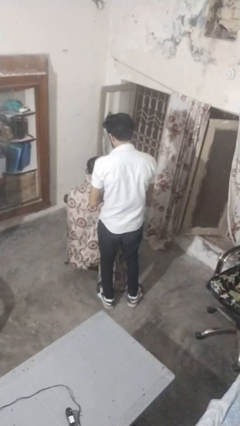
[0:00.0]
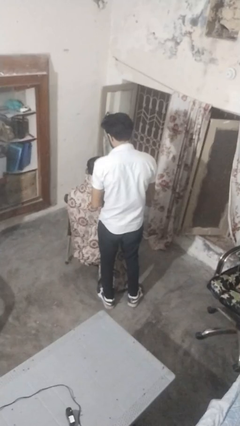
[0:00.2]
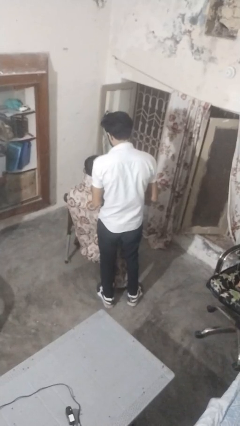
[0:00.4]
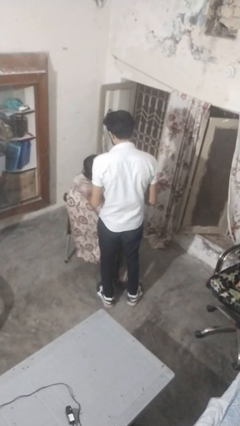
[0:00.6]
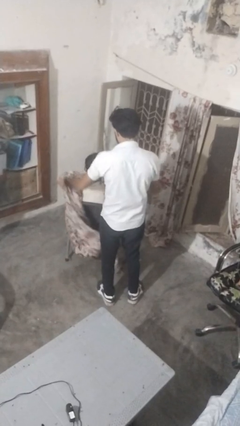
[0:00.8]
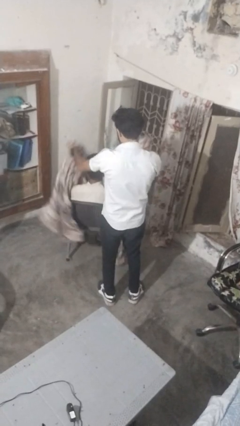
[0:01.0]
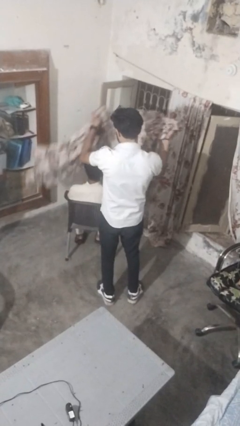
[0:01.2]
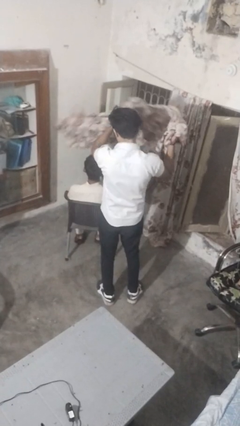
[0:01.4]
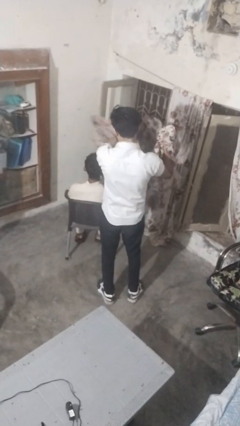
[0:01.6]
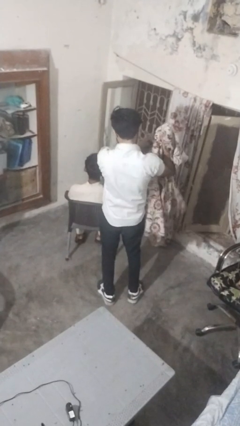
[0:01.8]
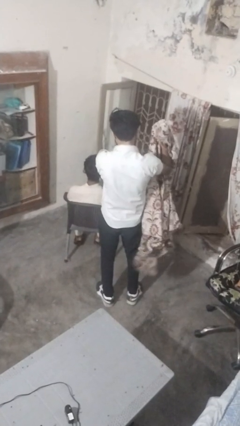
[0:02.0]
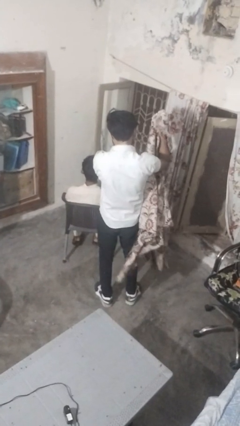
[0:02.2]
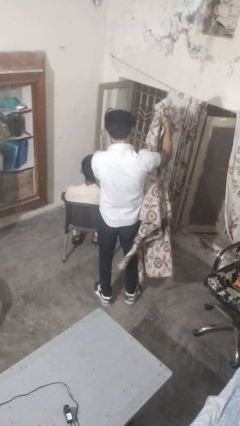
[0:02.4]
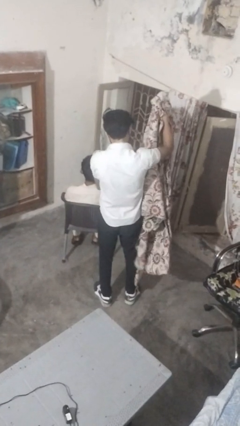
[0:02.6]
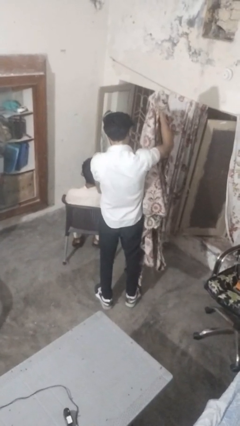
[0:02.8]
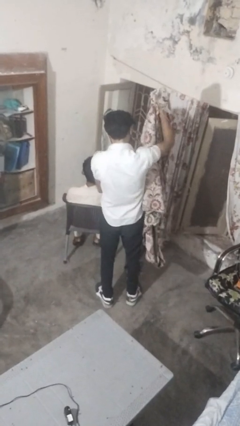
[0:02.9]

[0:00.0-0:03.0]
person uncovers friend with blanket

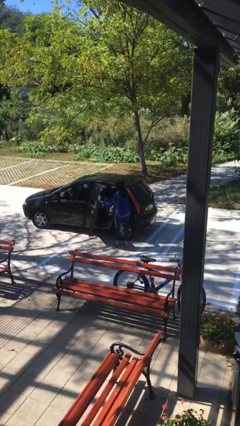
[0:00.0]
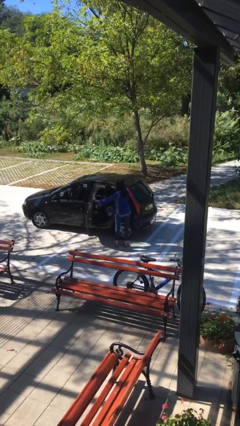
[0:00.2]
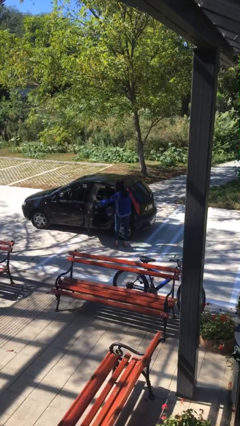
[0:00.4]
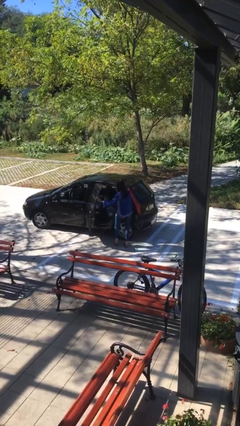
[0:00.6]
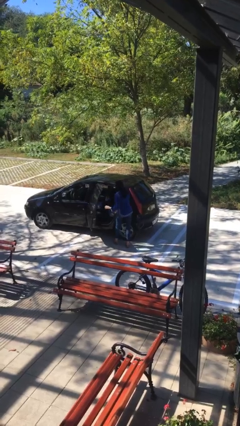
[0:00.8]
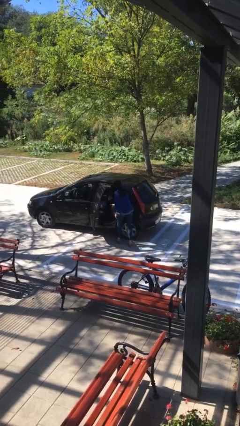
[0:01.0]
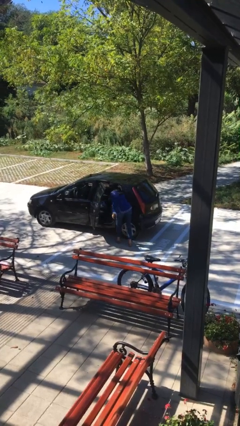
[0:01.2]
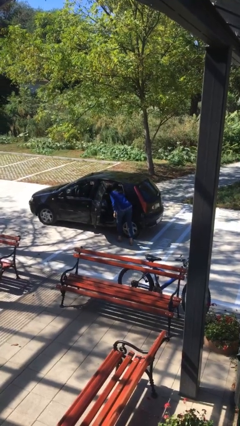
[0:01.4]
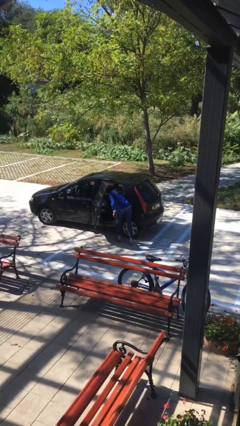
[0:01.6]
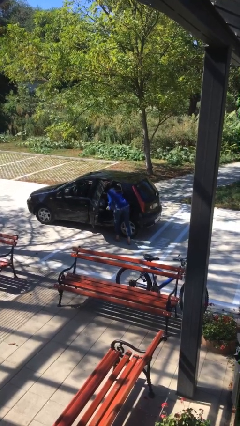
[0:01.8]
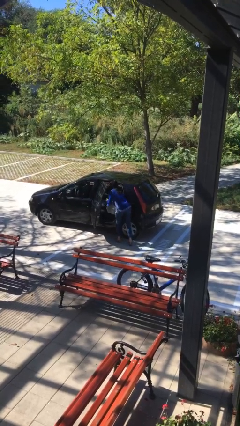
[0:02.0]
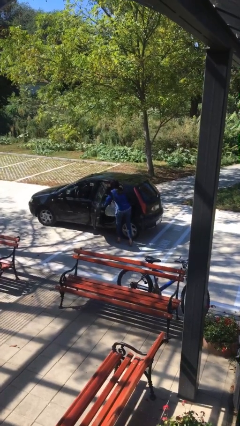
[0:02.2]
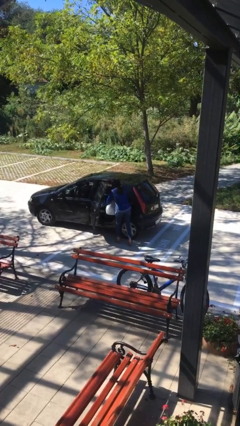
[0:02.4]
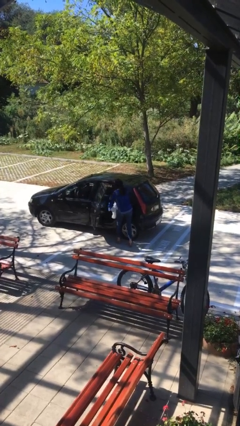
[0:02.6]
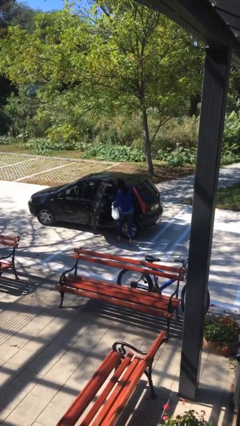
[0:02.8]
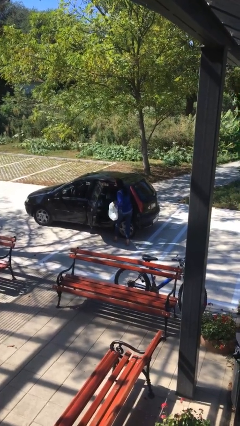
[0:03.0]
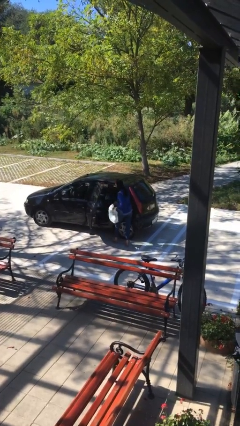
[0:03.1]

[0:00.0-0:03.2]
person unloads car

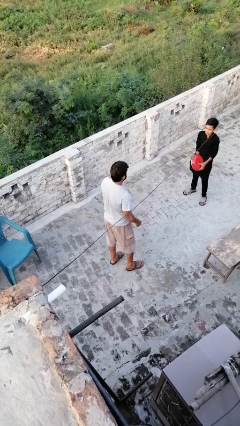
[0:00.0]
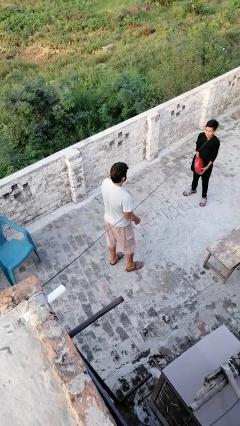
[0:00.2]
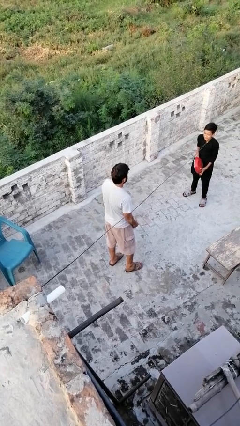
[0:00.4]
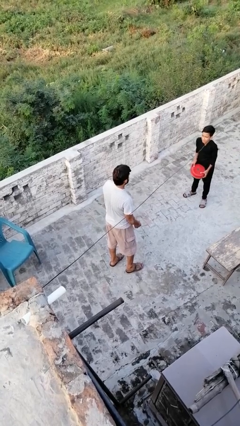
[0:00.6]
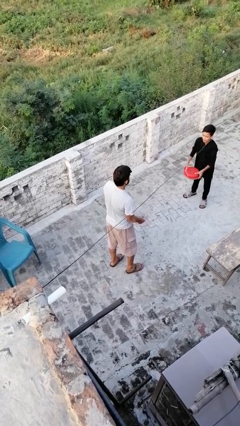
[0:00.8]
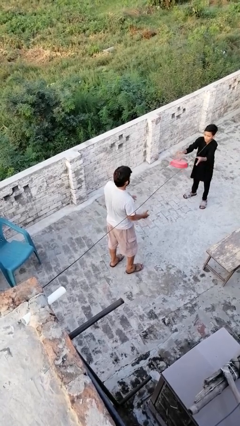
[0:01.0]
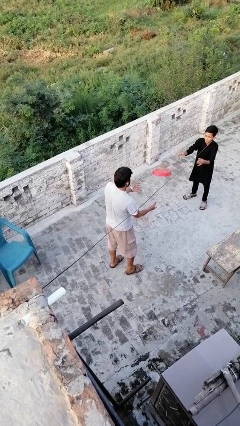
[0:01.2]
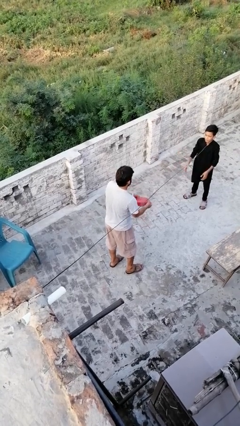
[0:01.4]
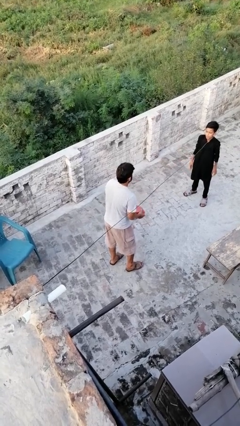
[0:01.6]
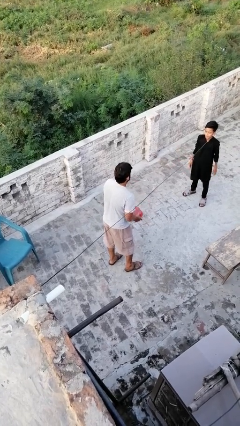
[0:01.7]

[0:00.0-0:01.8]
person catches object from person

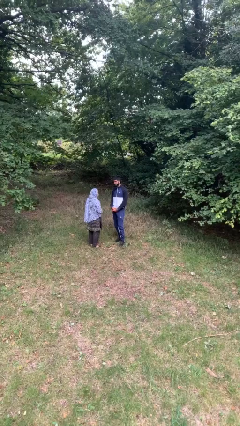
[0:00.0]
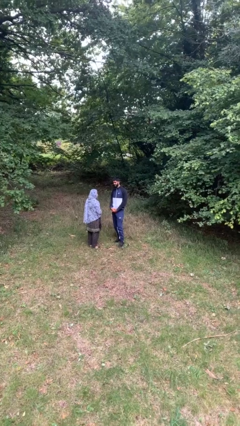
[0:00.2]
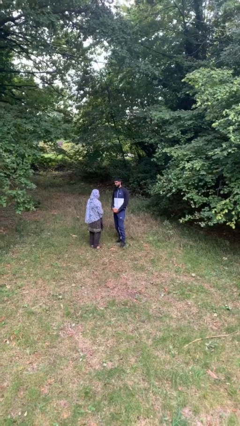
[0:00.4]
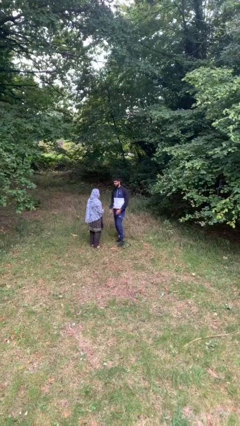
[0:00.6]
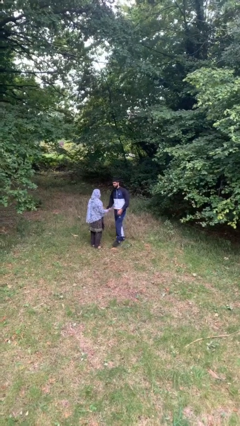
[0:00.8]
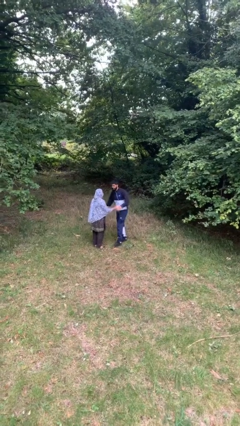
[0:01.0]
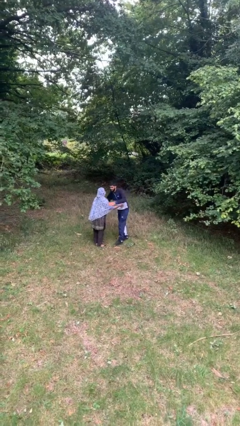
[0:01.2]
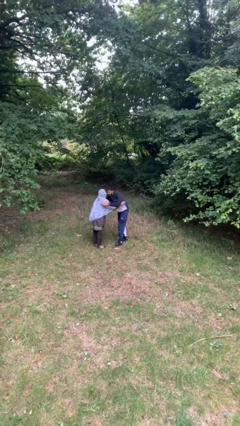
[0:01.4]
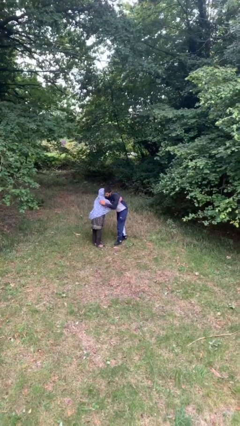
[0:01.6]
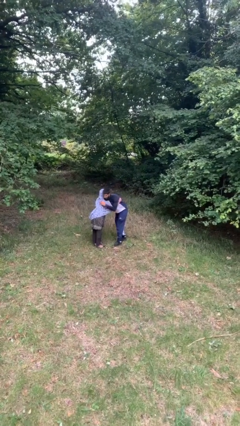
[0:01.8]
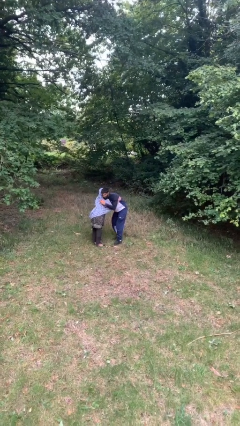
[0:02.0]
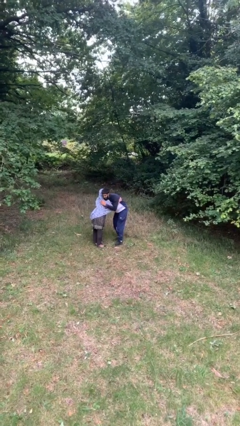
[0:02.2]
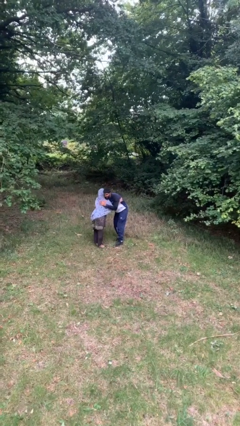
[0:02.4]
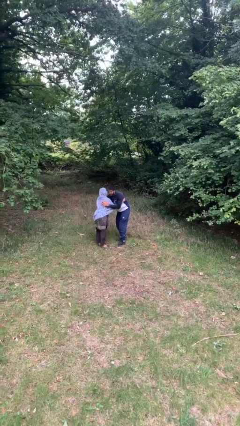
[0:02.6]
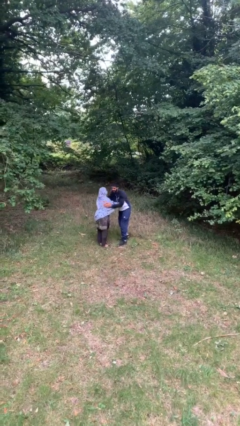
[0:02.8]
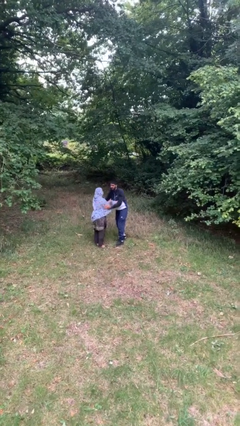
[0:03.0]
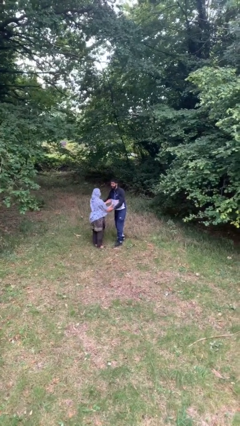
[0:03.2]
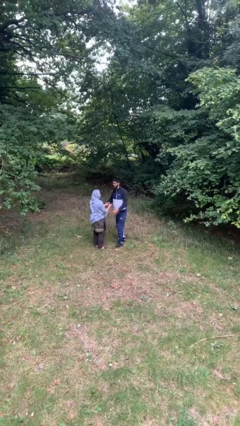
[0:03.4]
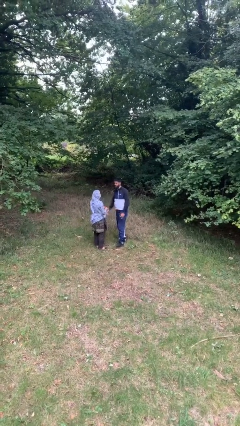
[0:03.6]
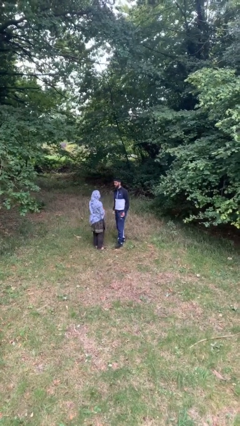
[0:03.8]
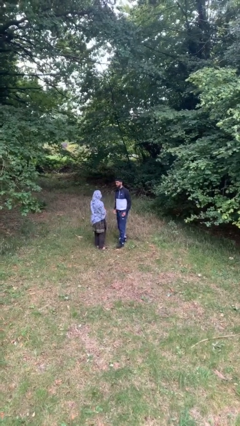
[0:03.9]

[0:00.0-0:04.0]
person embraces person

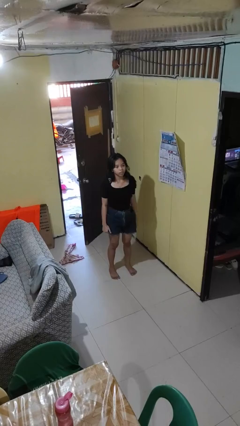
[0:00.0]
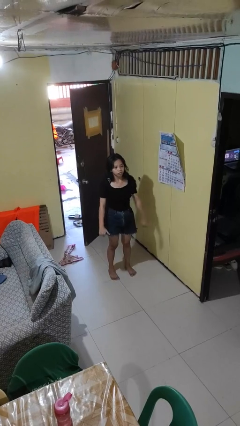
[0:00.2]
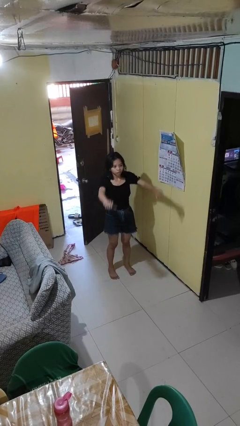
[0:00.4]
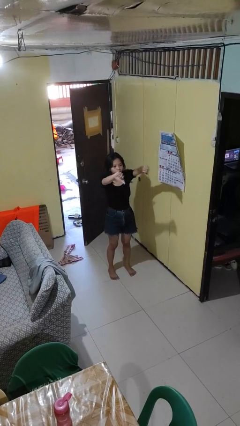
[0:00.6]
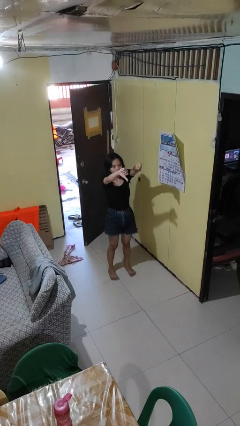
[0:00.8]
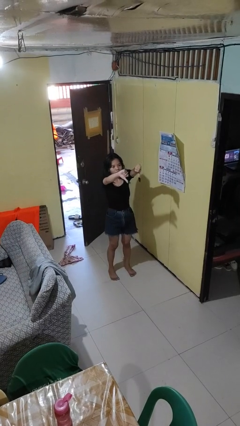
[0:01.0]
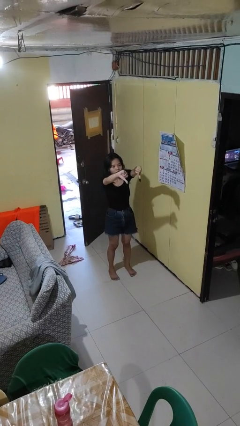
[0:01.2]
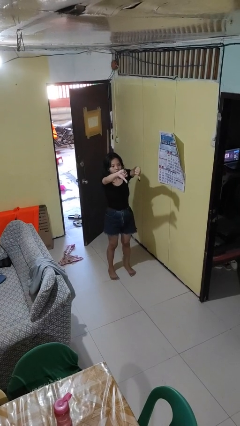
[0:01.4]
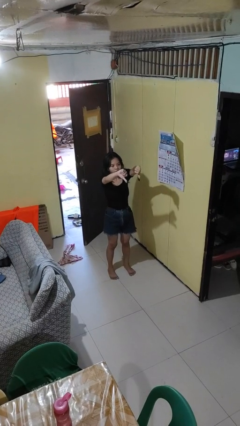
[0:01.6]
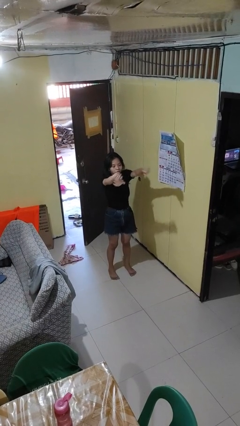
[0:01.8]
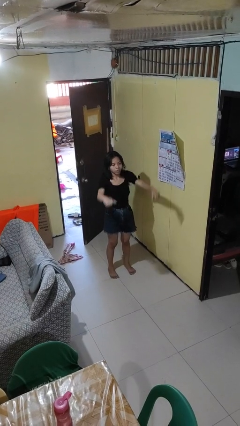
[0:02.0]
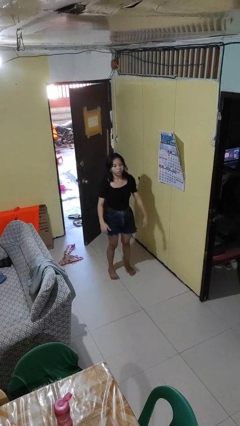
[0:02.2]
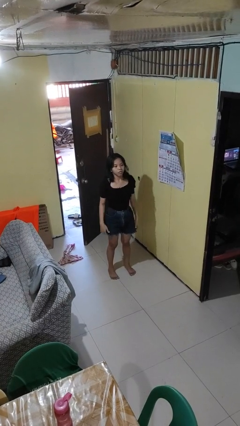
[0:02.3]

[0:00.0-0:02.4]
person gestures thumbs down

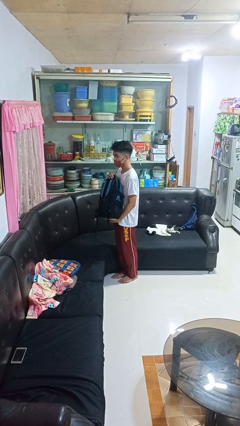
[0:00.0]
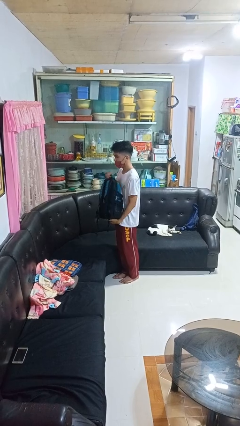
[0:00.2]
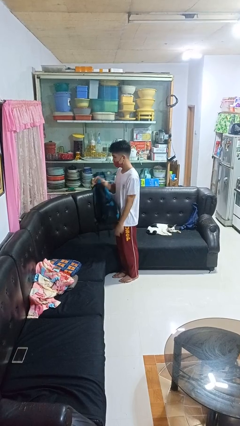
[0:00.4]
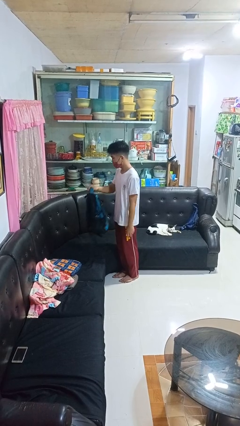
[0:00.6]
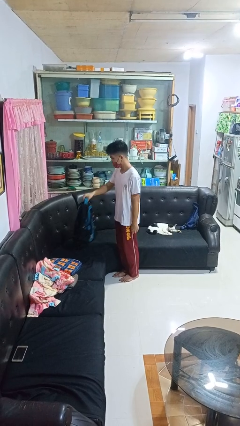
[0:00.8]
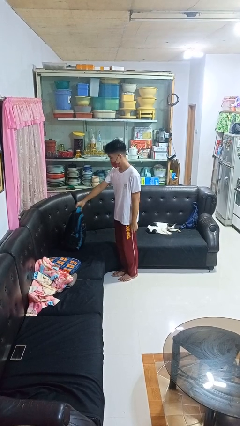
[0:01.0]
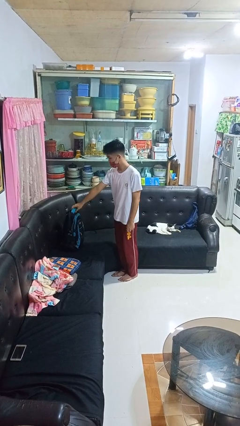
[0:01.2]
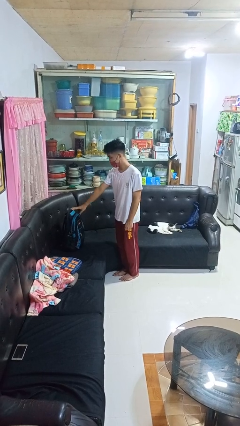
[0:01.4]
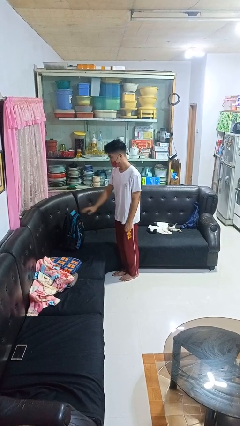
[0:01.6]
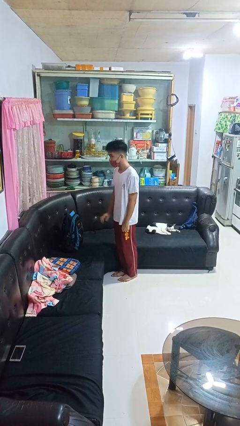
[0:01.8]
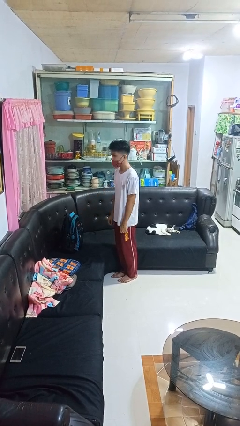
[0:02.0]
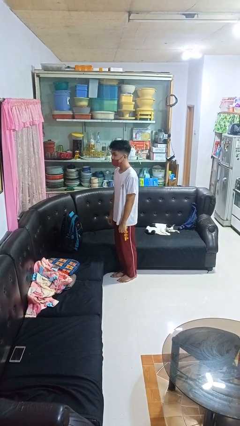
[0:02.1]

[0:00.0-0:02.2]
person puts down object on couch

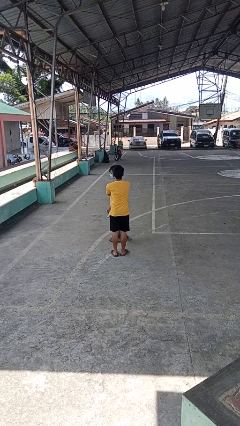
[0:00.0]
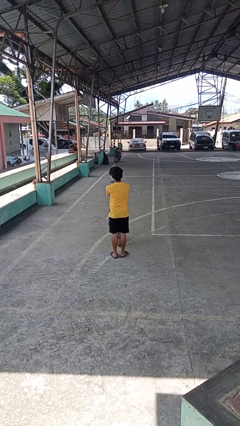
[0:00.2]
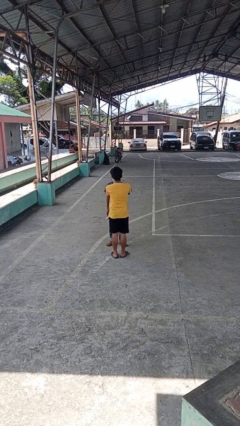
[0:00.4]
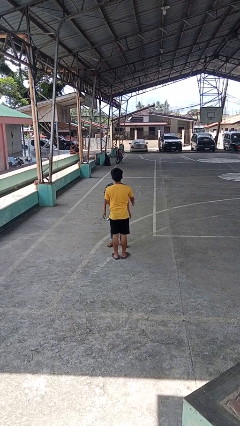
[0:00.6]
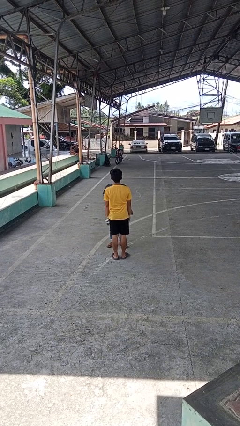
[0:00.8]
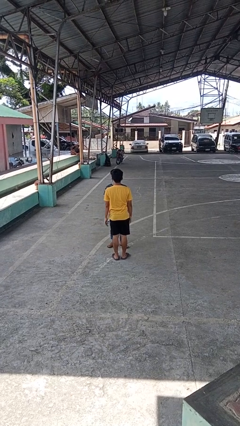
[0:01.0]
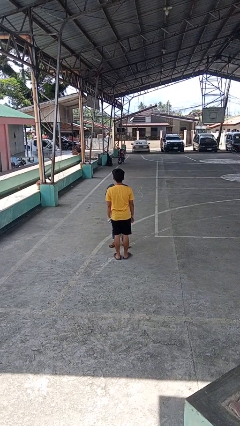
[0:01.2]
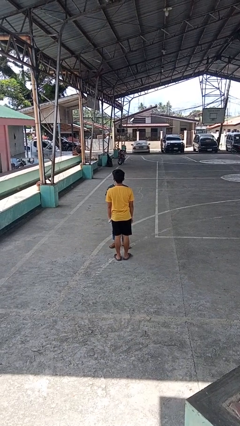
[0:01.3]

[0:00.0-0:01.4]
person spins person around
